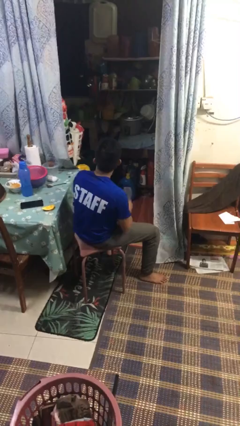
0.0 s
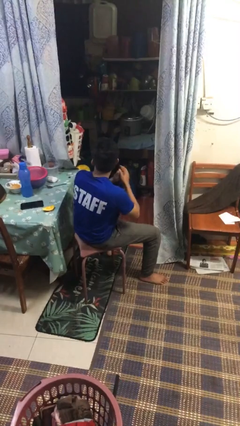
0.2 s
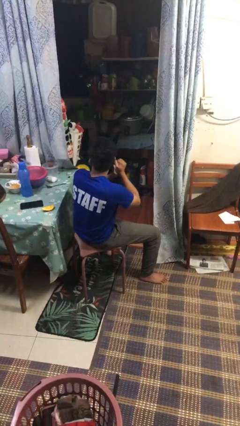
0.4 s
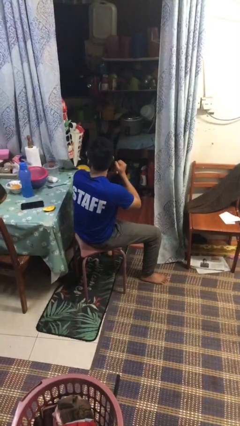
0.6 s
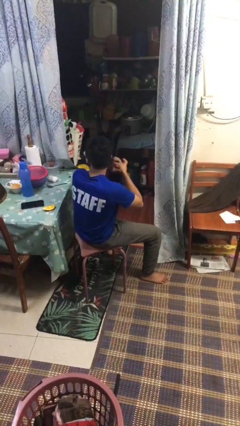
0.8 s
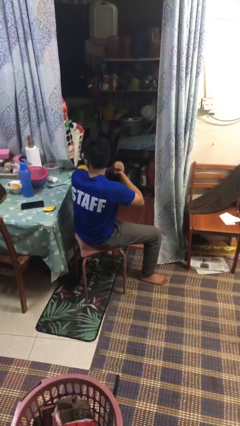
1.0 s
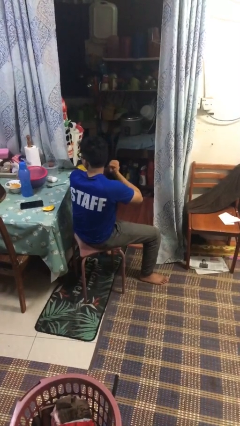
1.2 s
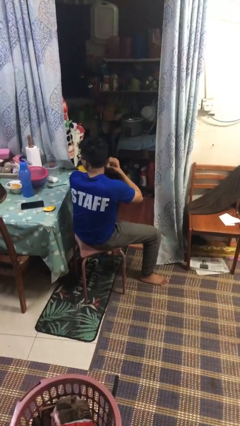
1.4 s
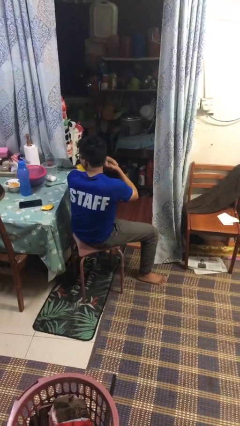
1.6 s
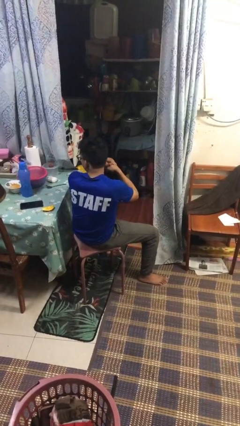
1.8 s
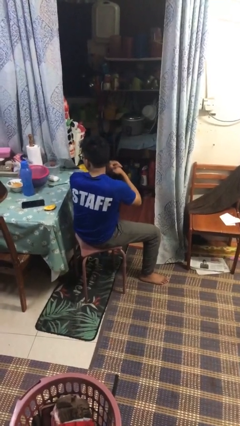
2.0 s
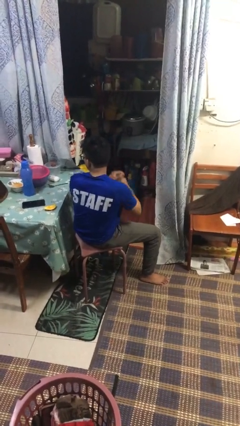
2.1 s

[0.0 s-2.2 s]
person cracks knuckles

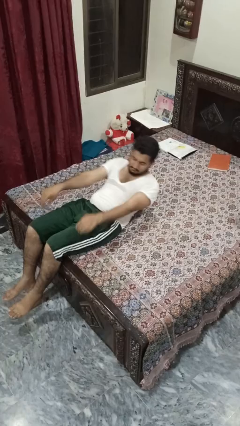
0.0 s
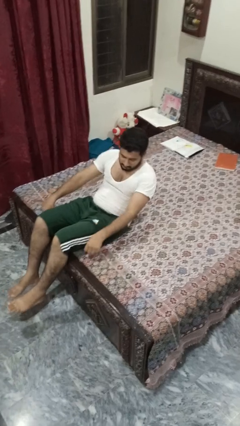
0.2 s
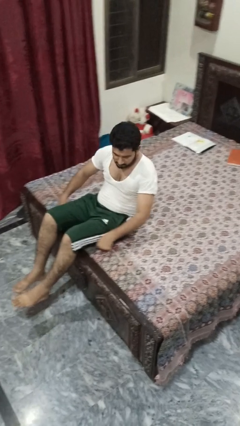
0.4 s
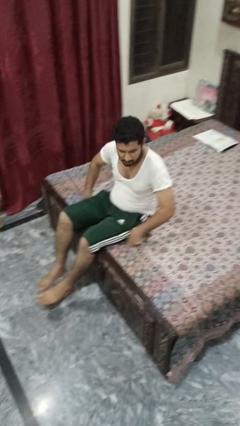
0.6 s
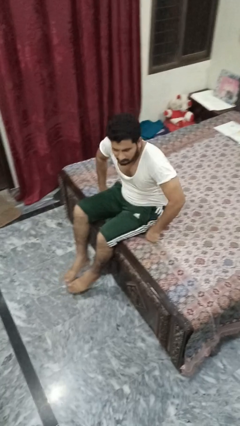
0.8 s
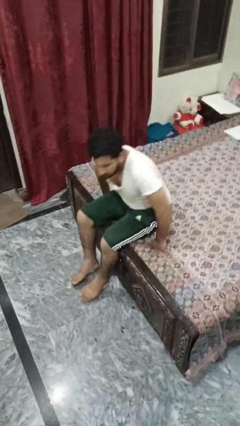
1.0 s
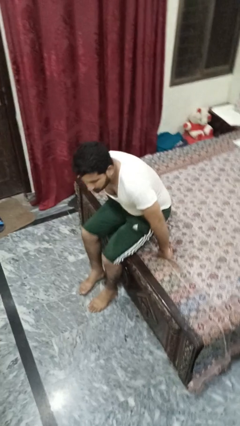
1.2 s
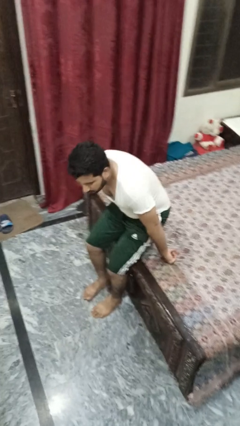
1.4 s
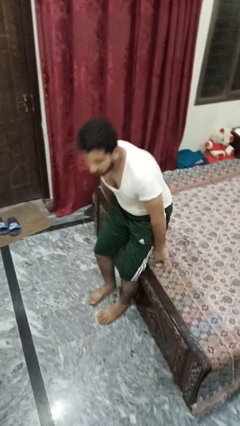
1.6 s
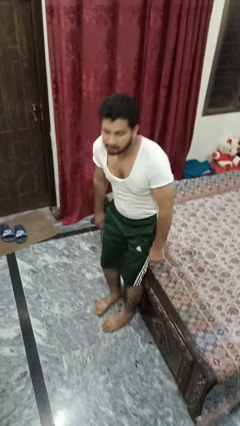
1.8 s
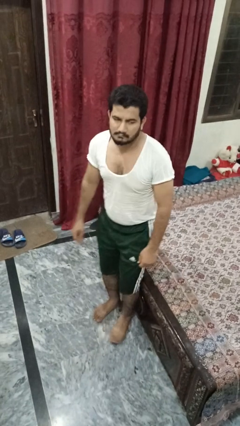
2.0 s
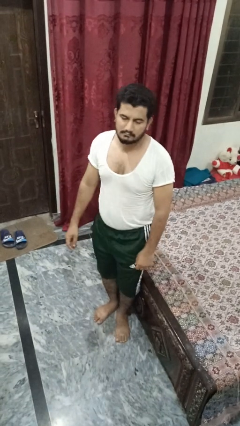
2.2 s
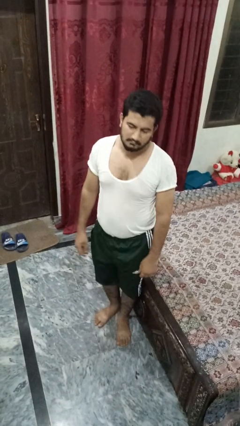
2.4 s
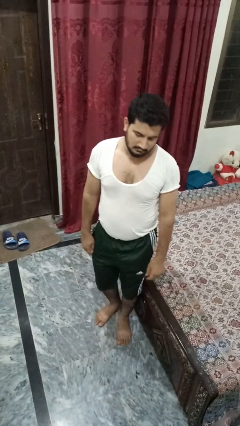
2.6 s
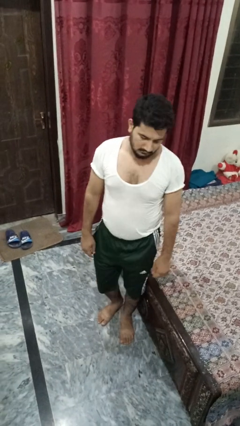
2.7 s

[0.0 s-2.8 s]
person stands up

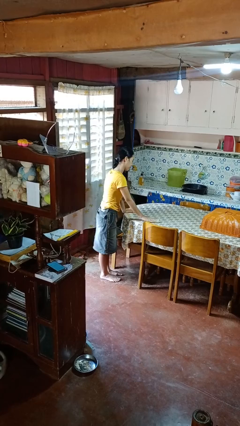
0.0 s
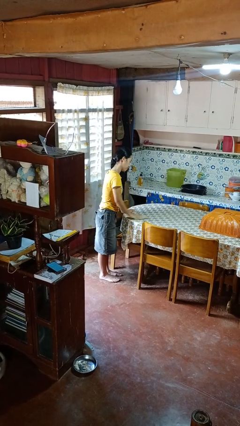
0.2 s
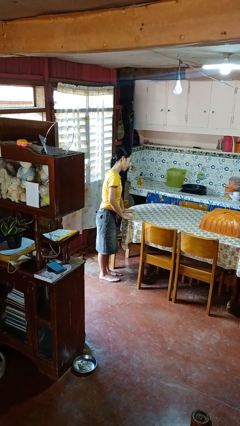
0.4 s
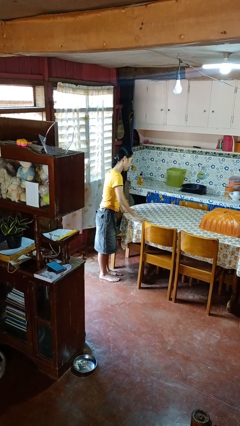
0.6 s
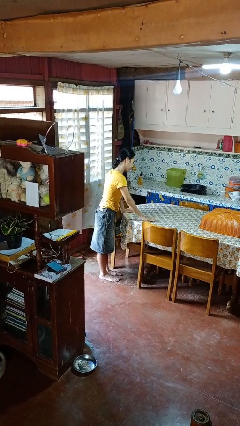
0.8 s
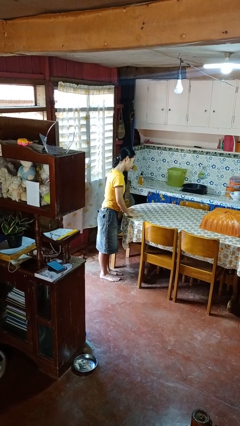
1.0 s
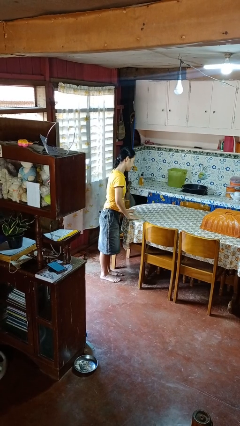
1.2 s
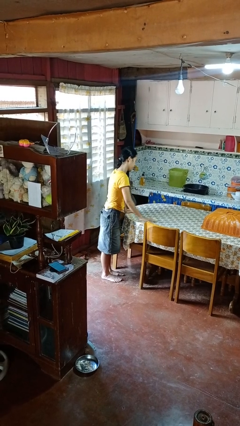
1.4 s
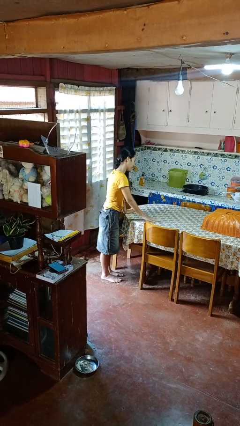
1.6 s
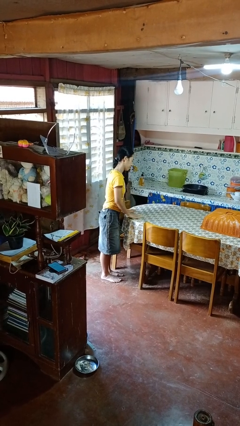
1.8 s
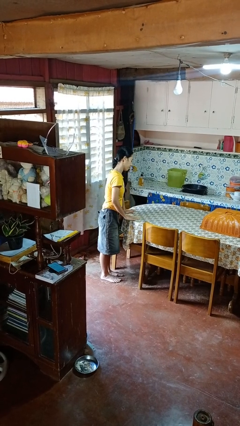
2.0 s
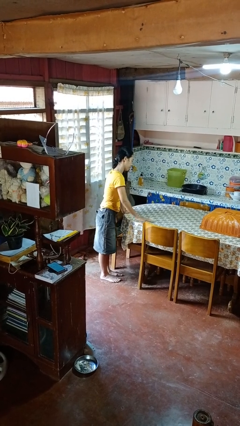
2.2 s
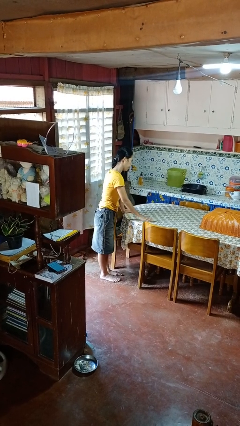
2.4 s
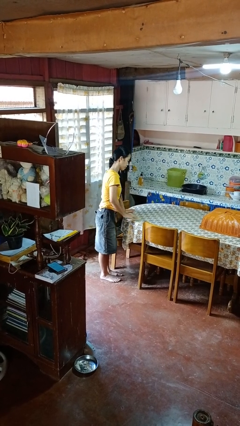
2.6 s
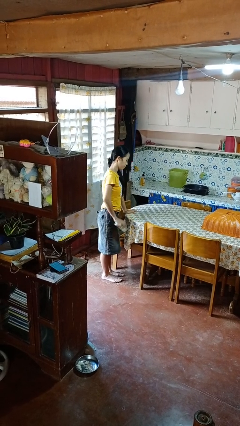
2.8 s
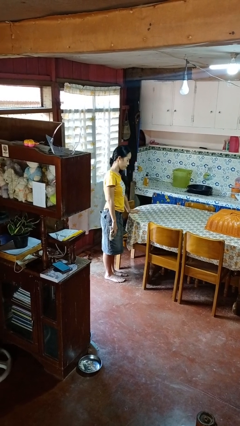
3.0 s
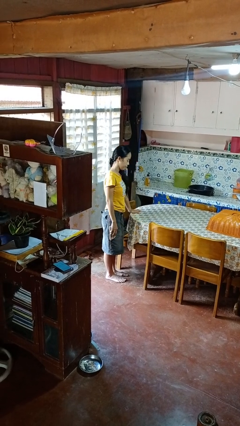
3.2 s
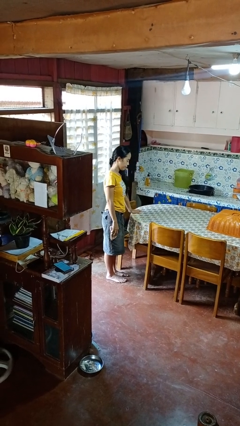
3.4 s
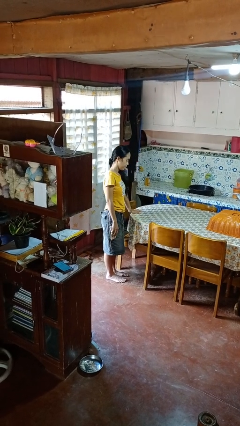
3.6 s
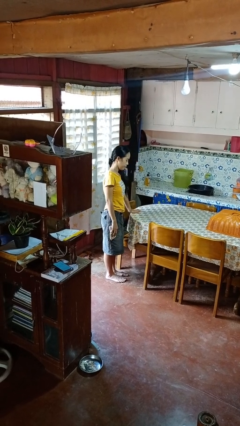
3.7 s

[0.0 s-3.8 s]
person cleans table with rag

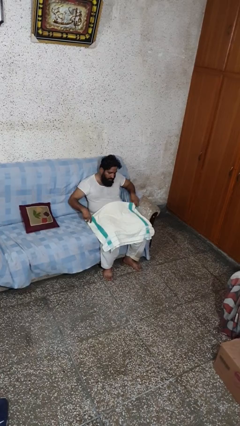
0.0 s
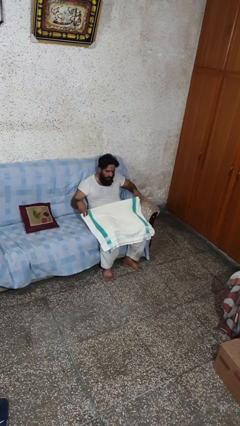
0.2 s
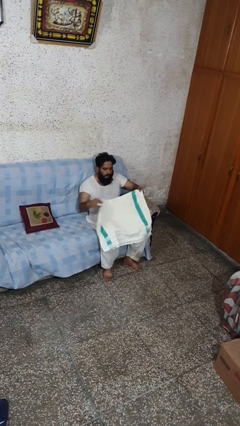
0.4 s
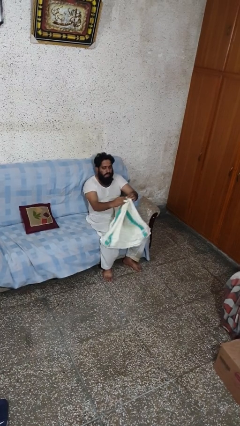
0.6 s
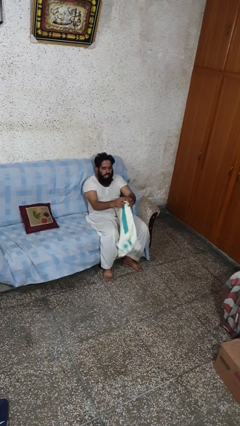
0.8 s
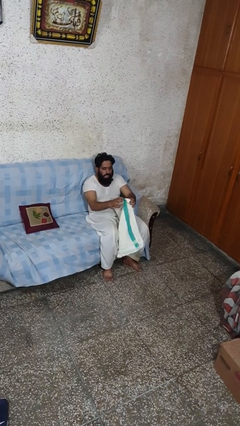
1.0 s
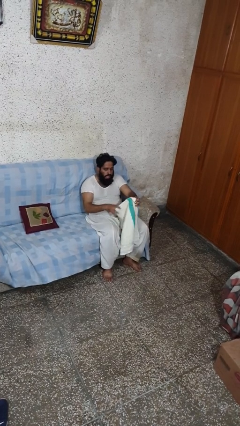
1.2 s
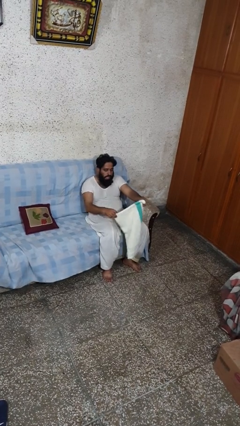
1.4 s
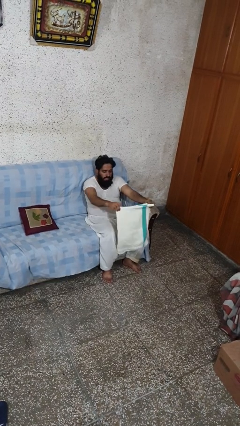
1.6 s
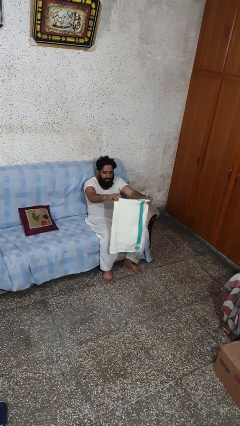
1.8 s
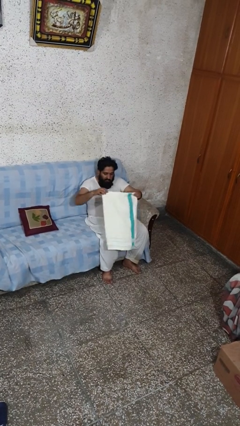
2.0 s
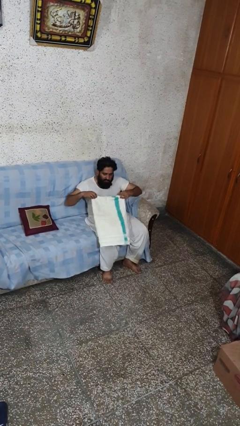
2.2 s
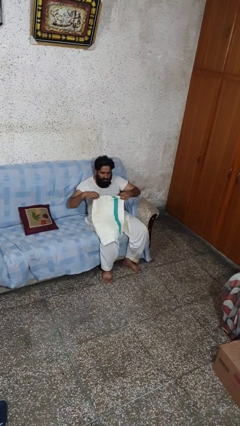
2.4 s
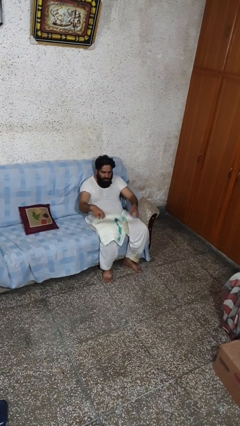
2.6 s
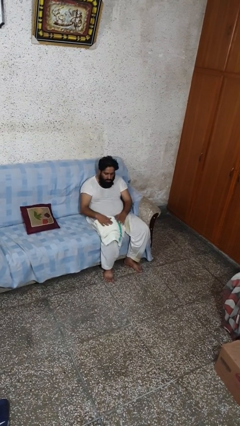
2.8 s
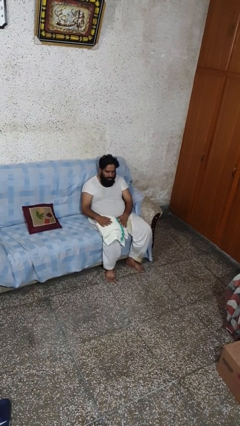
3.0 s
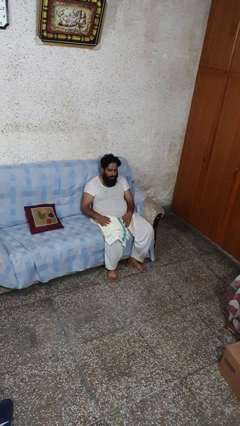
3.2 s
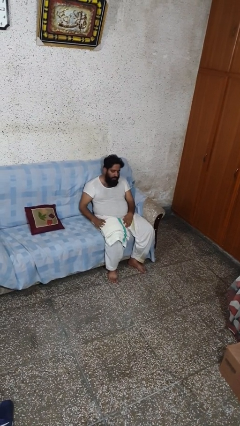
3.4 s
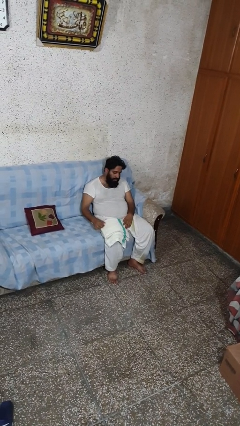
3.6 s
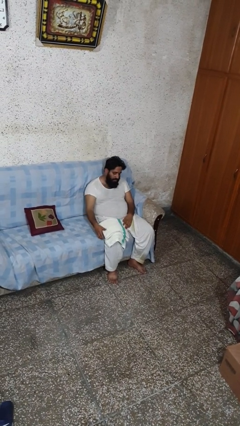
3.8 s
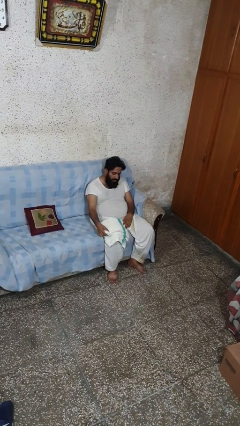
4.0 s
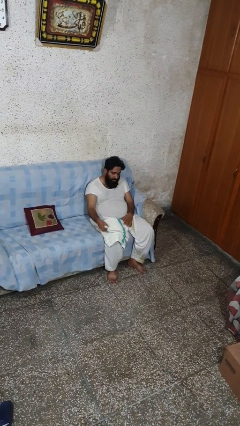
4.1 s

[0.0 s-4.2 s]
person folds towel

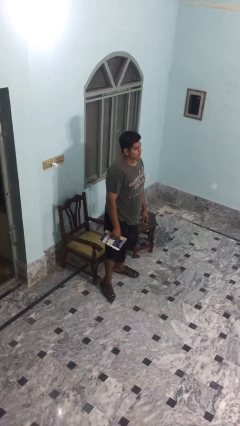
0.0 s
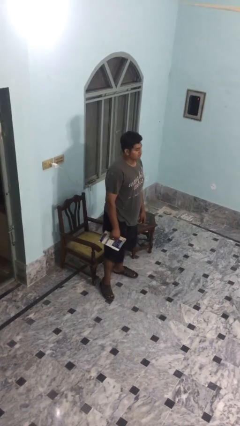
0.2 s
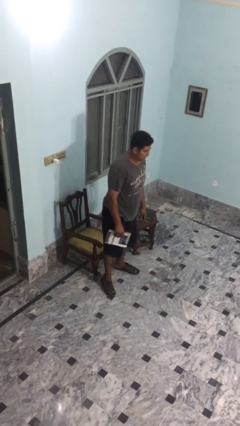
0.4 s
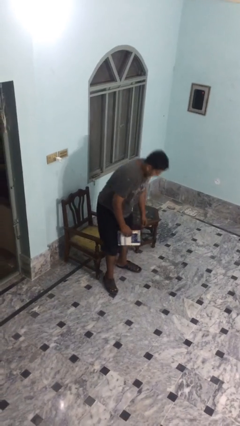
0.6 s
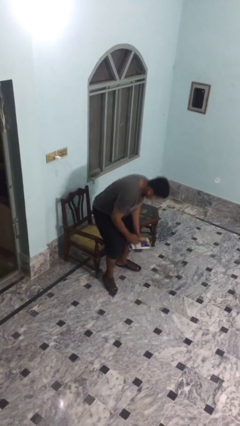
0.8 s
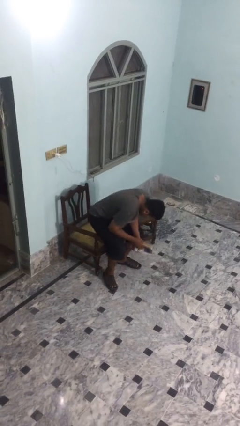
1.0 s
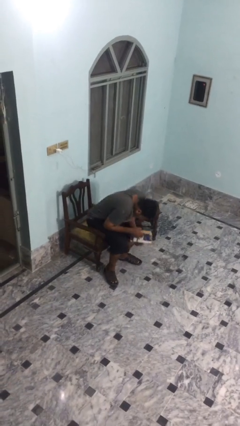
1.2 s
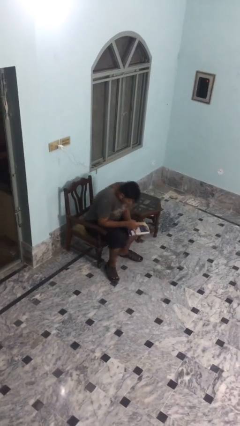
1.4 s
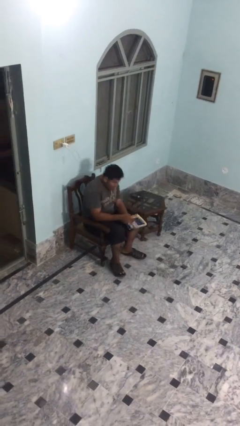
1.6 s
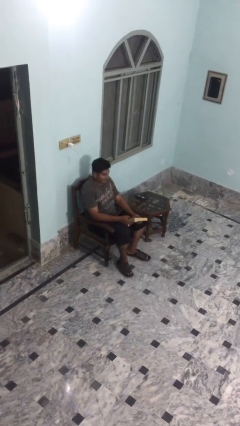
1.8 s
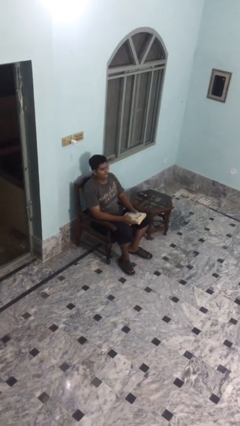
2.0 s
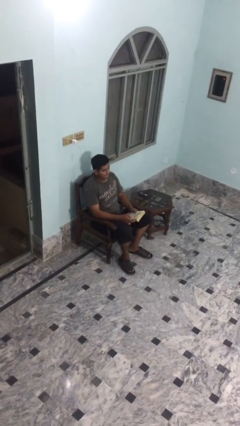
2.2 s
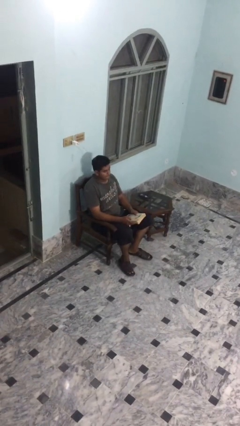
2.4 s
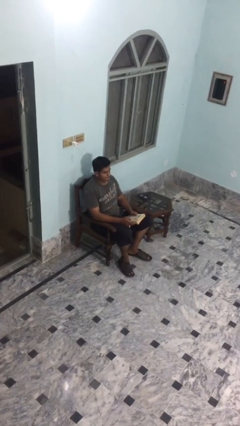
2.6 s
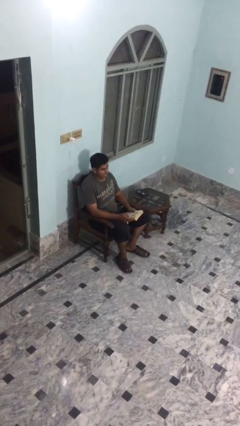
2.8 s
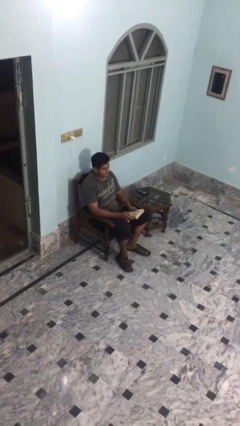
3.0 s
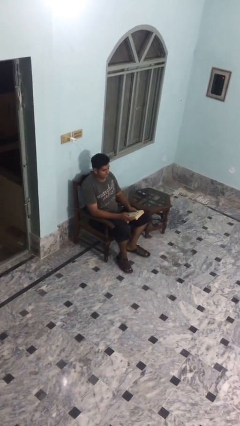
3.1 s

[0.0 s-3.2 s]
person sits down

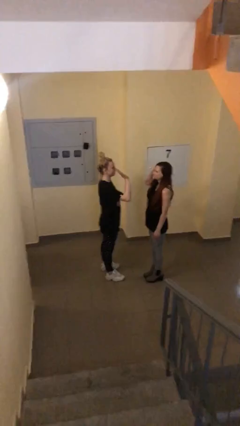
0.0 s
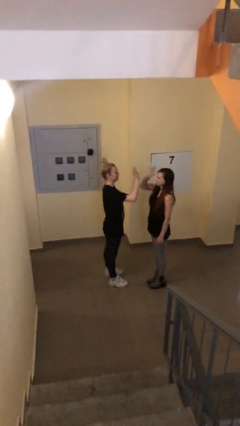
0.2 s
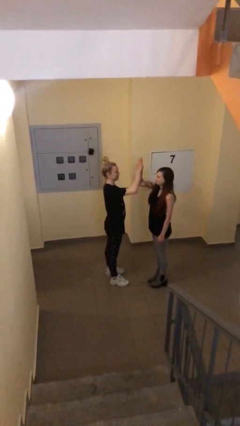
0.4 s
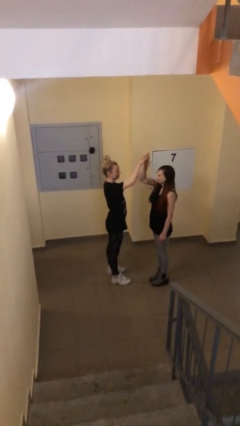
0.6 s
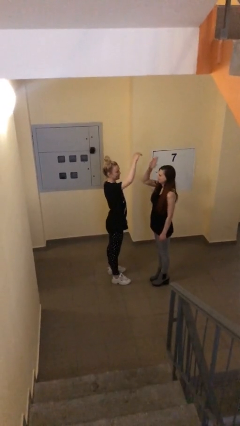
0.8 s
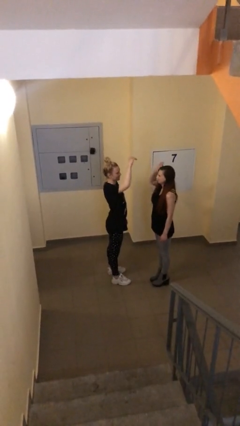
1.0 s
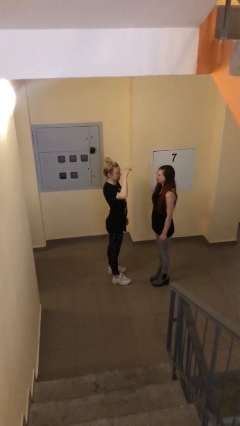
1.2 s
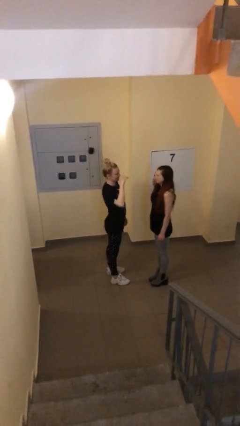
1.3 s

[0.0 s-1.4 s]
person highfives hand
